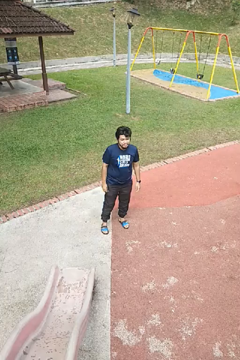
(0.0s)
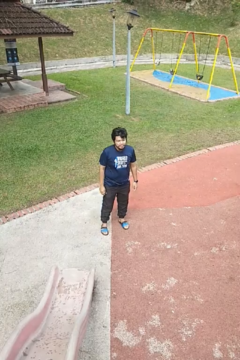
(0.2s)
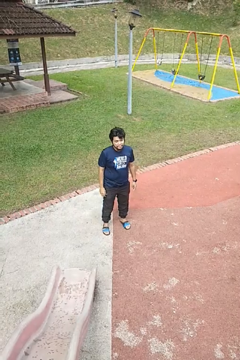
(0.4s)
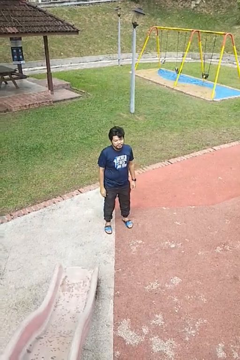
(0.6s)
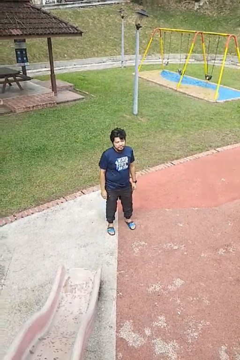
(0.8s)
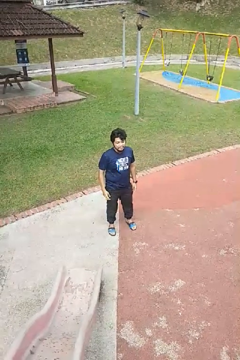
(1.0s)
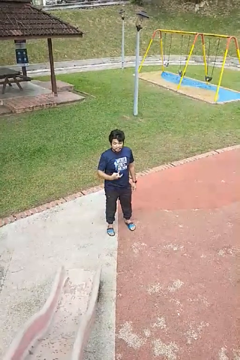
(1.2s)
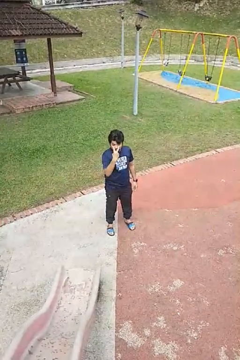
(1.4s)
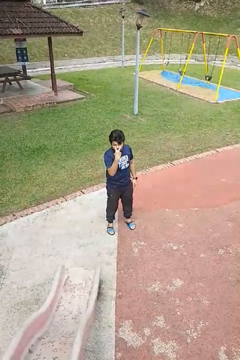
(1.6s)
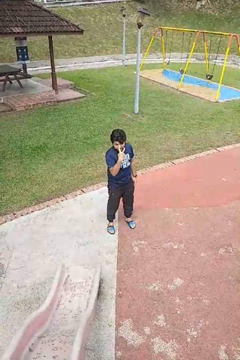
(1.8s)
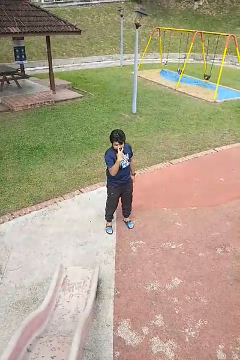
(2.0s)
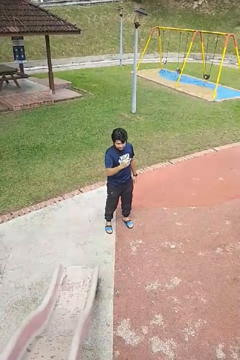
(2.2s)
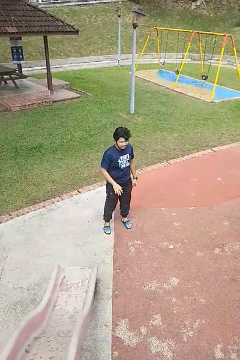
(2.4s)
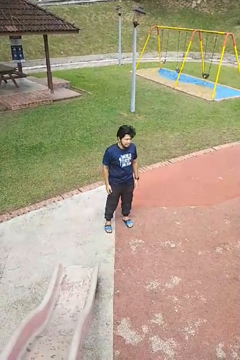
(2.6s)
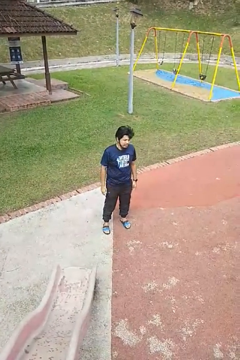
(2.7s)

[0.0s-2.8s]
person gestures watch closely

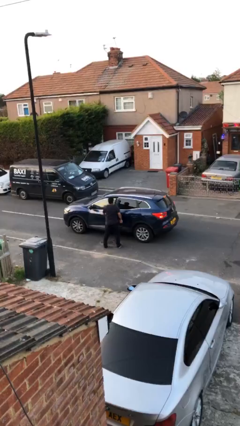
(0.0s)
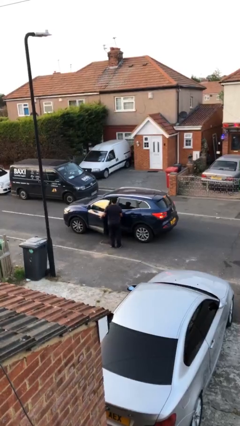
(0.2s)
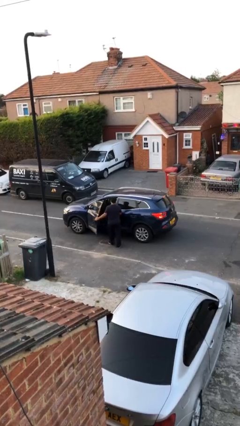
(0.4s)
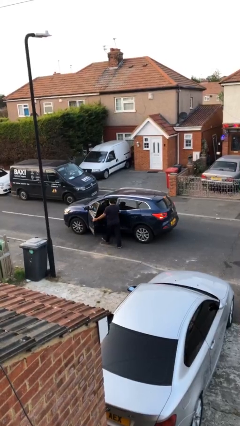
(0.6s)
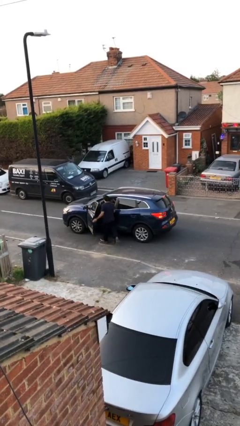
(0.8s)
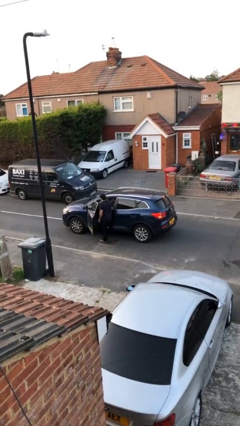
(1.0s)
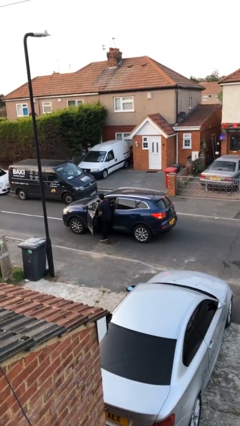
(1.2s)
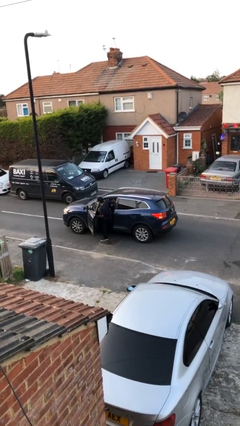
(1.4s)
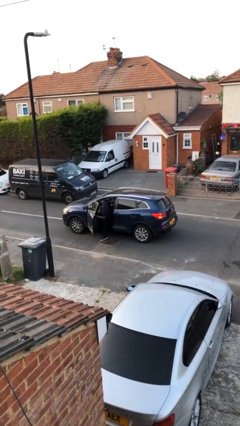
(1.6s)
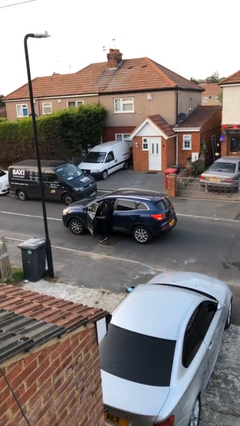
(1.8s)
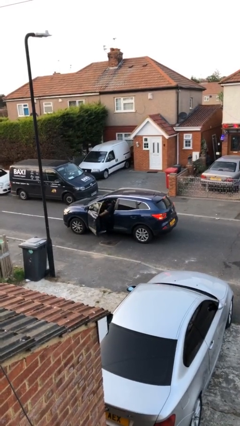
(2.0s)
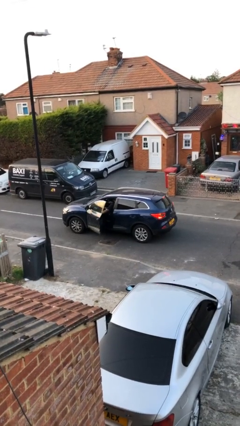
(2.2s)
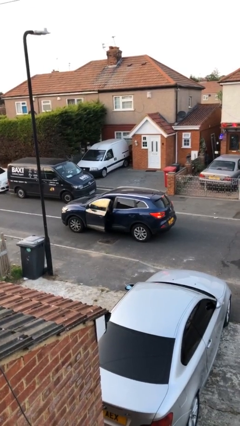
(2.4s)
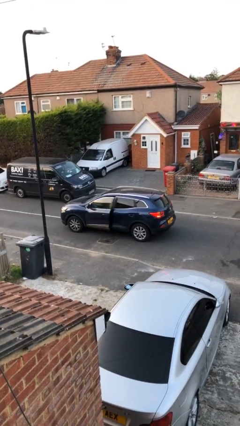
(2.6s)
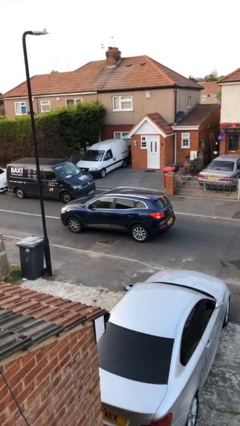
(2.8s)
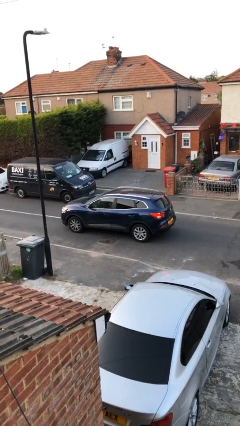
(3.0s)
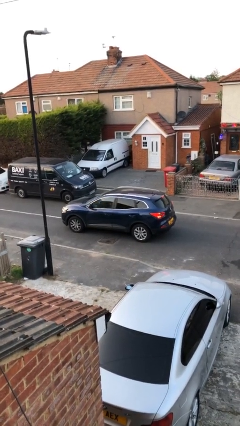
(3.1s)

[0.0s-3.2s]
car picks up person

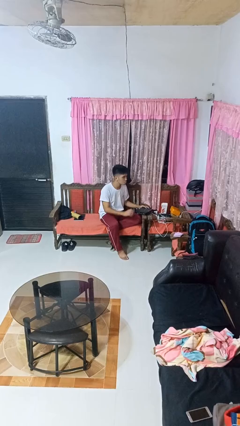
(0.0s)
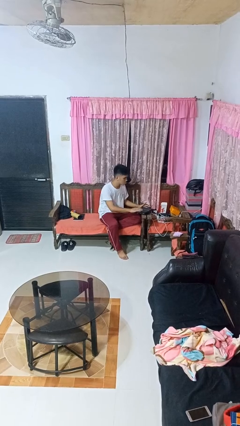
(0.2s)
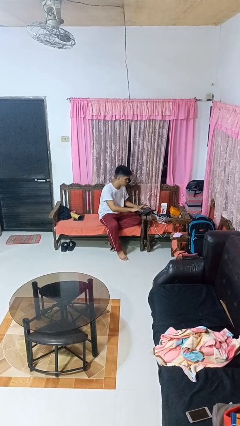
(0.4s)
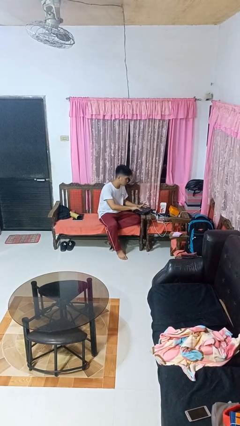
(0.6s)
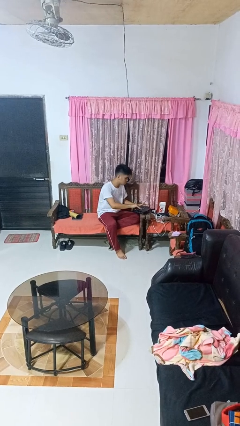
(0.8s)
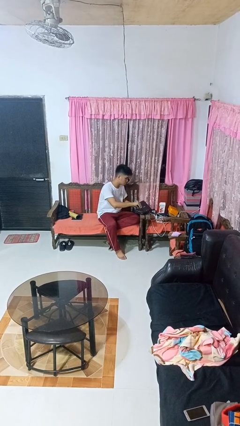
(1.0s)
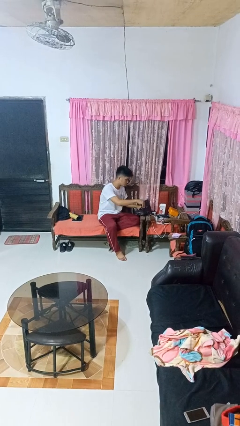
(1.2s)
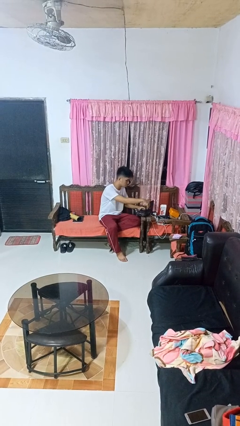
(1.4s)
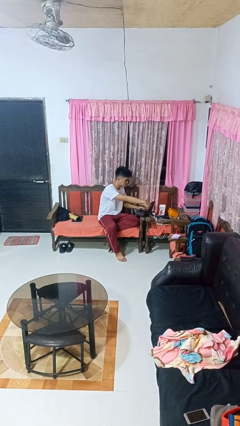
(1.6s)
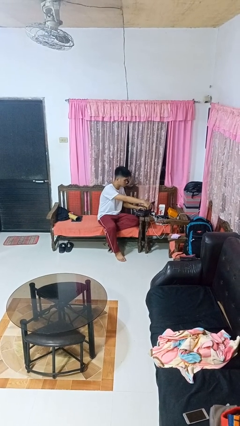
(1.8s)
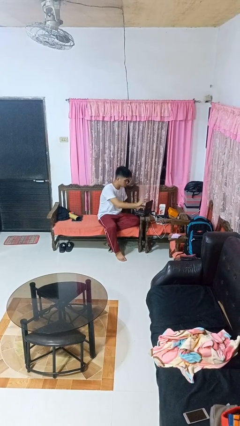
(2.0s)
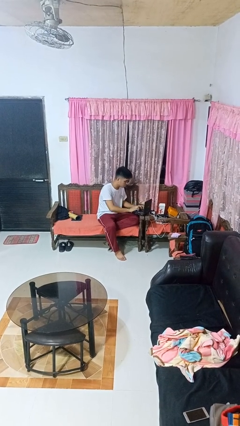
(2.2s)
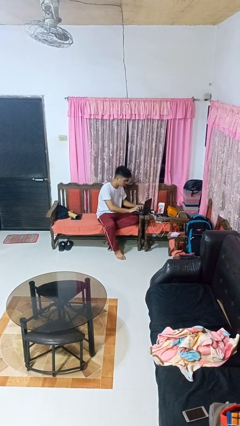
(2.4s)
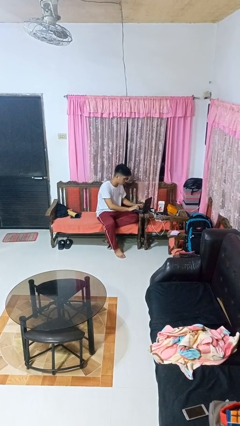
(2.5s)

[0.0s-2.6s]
person opens laptop

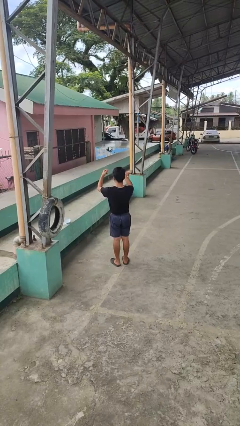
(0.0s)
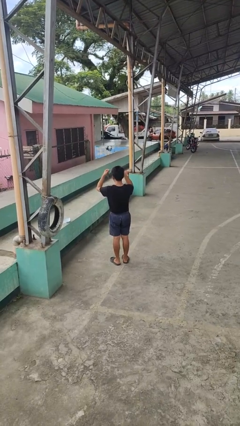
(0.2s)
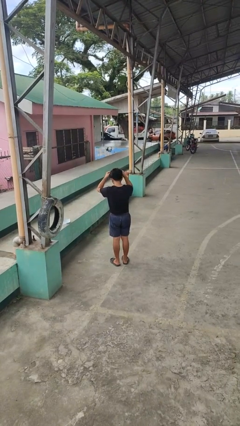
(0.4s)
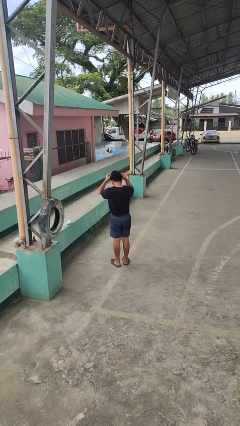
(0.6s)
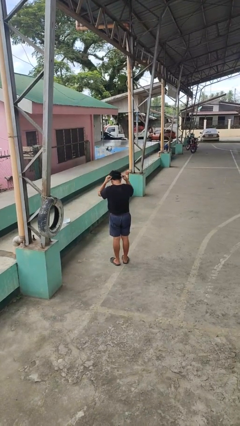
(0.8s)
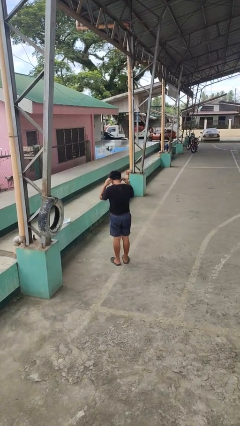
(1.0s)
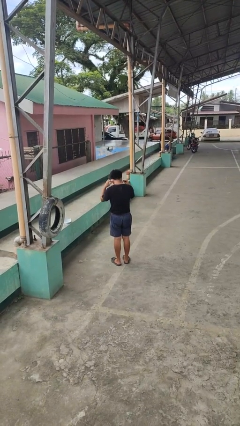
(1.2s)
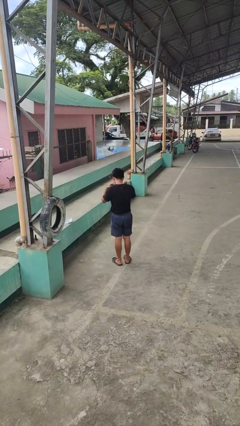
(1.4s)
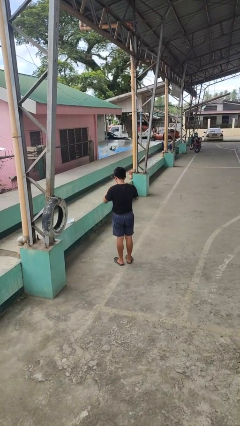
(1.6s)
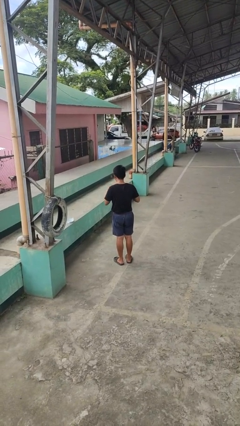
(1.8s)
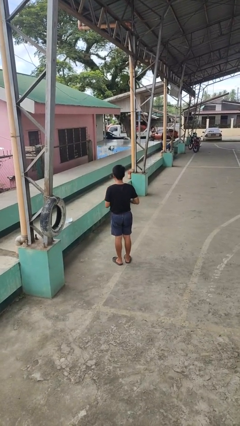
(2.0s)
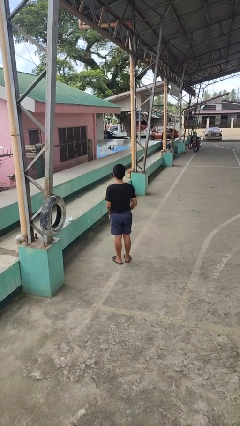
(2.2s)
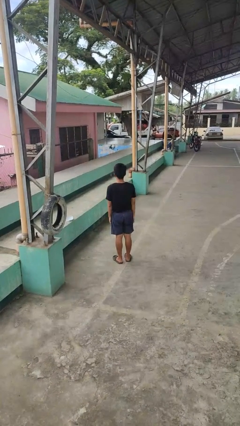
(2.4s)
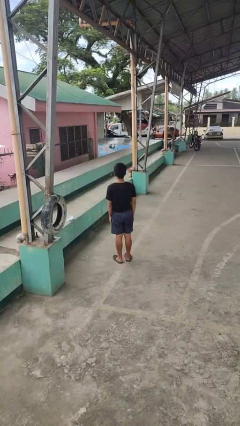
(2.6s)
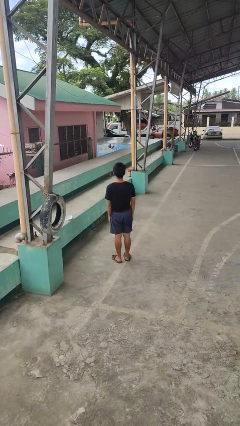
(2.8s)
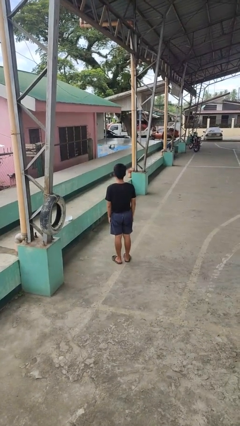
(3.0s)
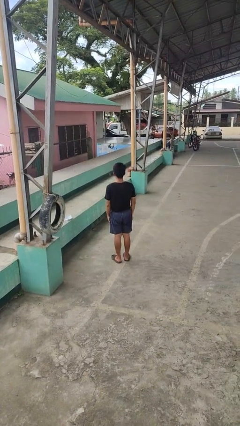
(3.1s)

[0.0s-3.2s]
person puts on necklace

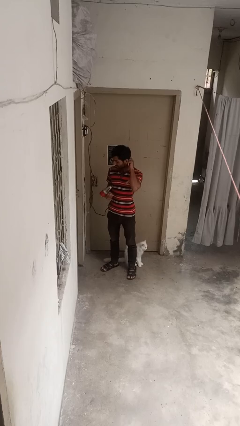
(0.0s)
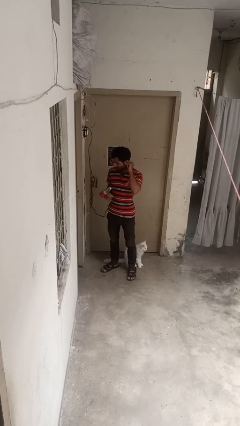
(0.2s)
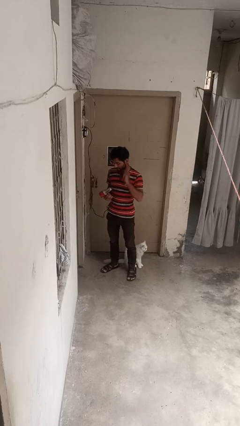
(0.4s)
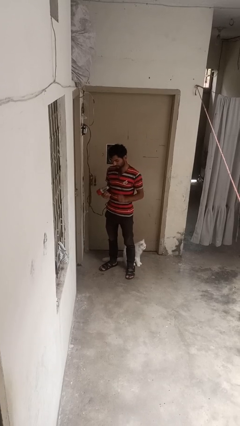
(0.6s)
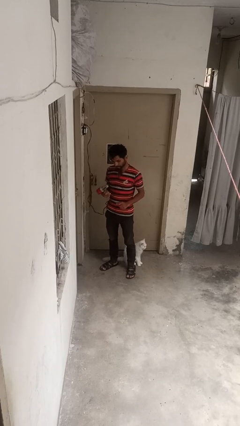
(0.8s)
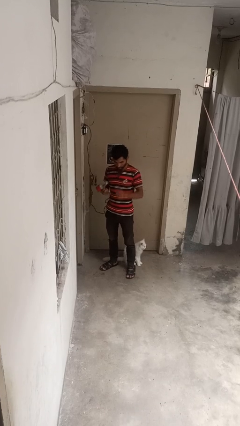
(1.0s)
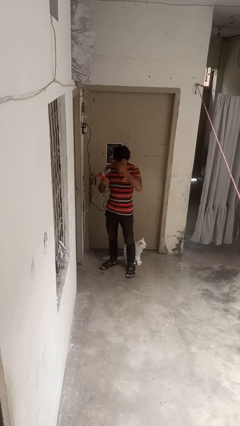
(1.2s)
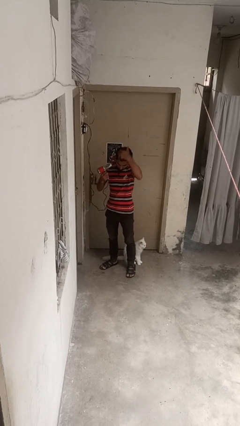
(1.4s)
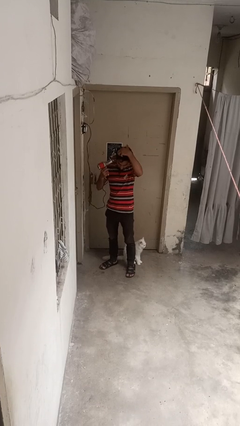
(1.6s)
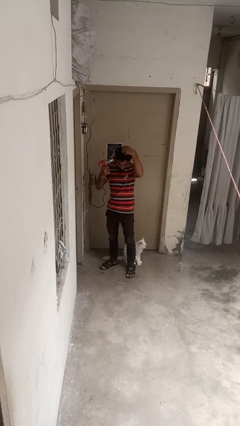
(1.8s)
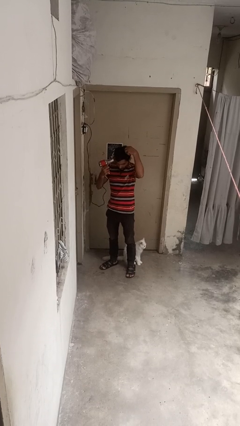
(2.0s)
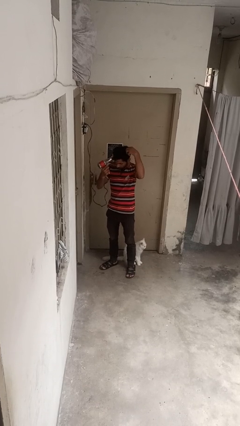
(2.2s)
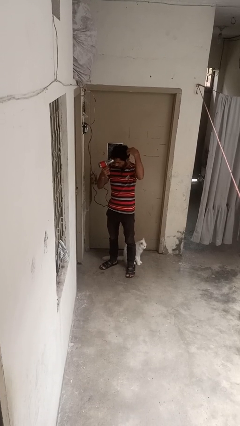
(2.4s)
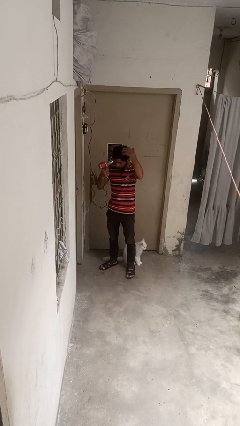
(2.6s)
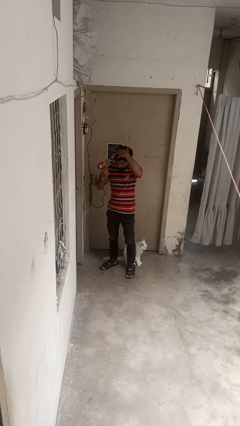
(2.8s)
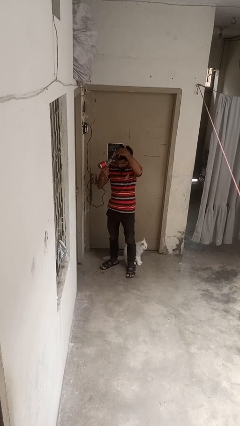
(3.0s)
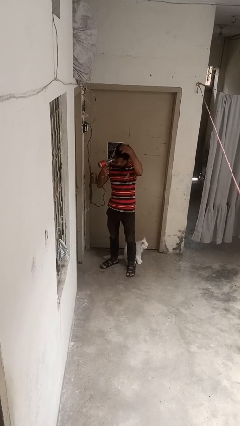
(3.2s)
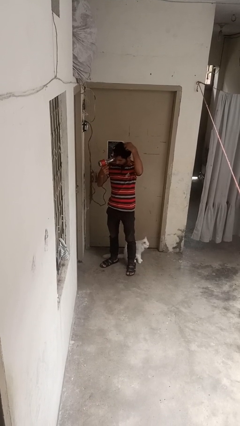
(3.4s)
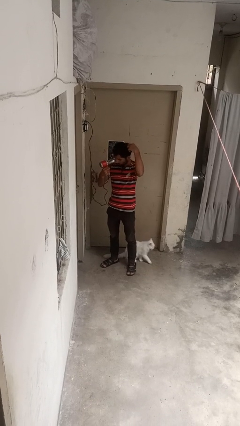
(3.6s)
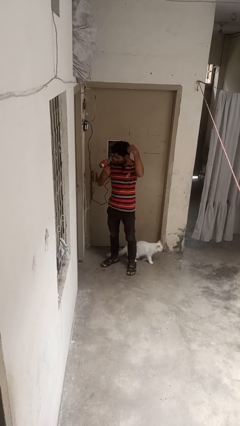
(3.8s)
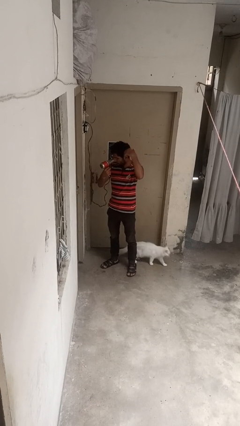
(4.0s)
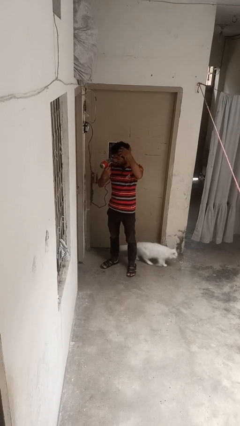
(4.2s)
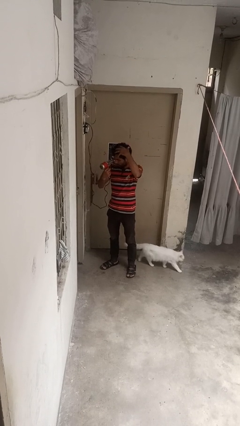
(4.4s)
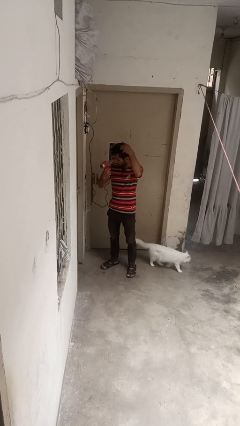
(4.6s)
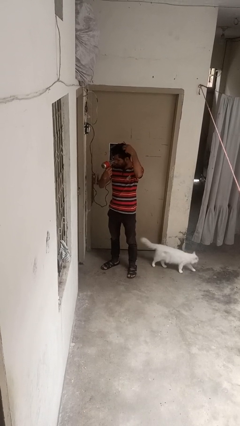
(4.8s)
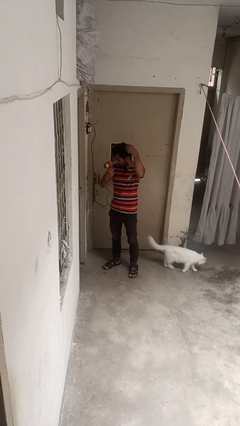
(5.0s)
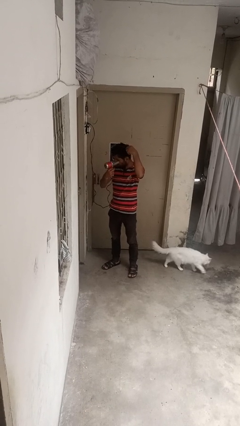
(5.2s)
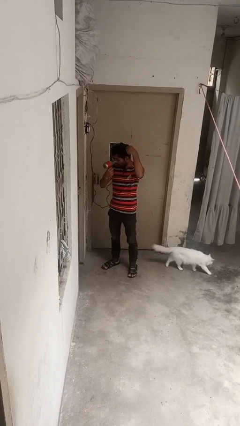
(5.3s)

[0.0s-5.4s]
person dries hair with hairdryer

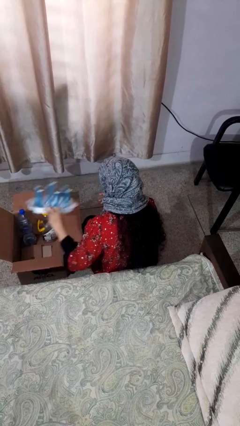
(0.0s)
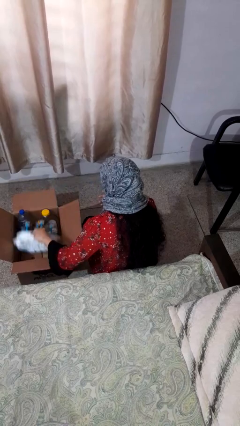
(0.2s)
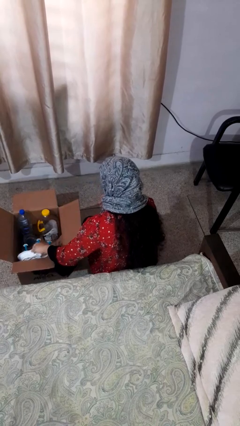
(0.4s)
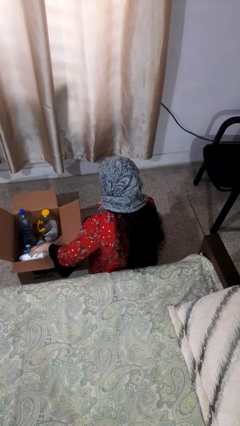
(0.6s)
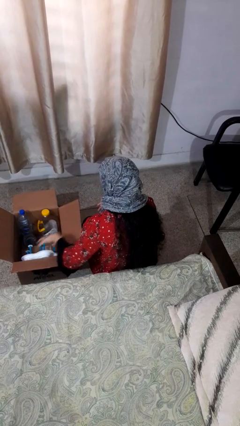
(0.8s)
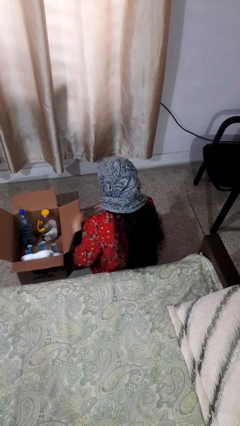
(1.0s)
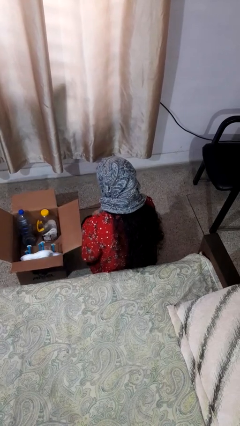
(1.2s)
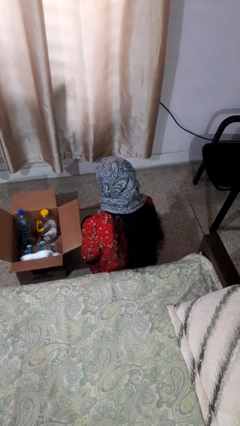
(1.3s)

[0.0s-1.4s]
person puts object into box
